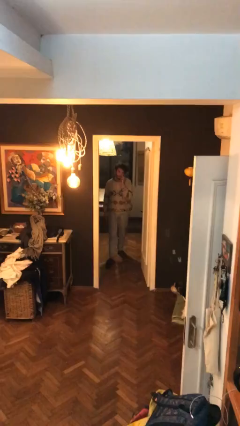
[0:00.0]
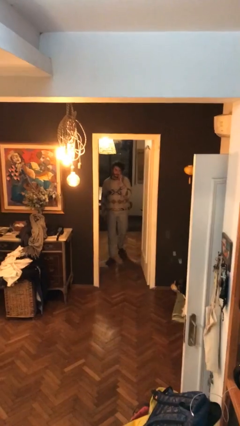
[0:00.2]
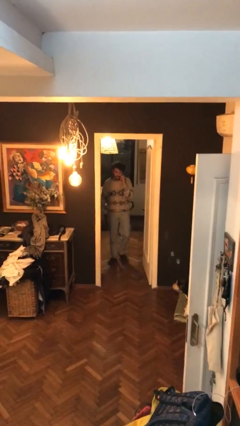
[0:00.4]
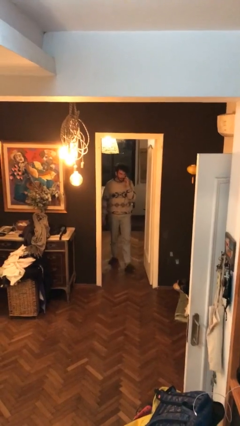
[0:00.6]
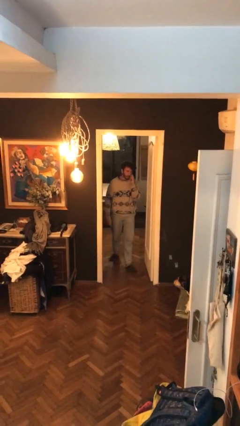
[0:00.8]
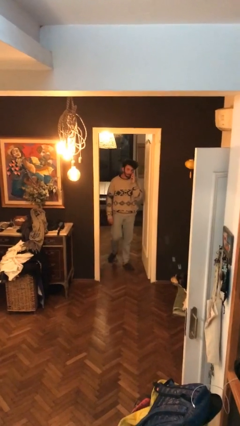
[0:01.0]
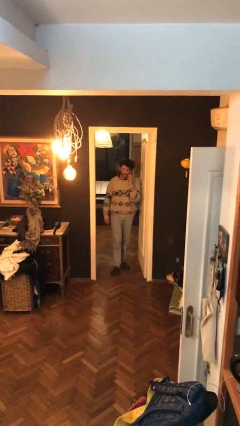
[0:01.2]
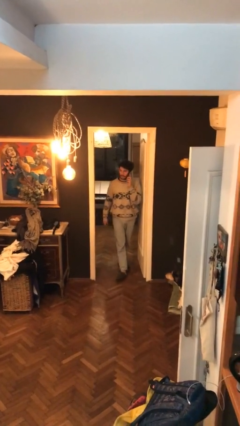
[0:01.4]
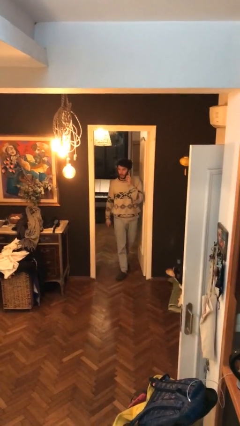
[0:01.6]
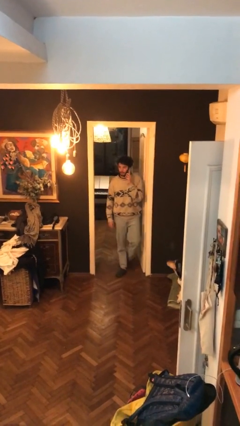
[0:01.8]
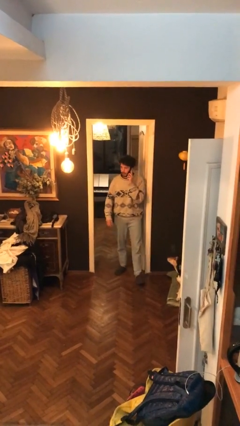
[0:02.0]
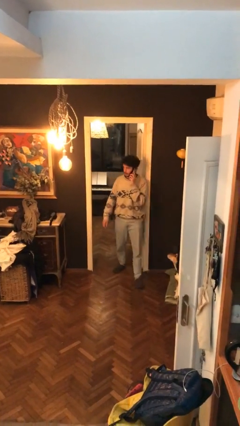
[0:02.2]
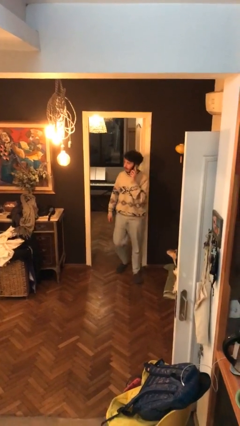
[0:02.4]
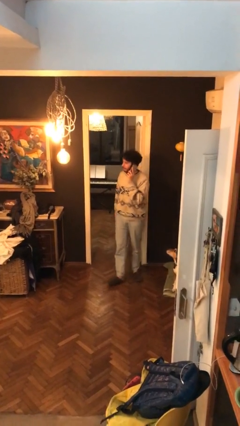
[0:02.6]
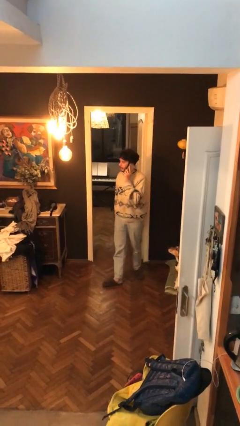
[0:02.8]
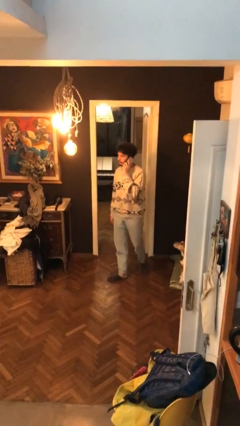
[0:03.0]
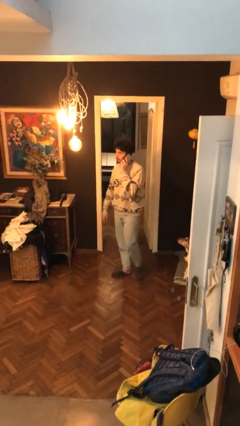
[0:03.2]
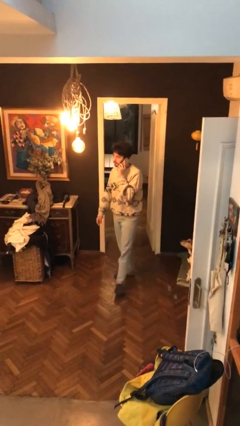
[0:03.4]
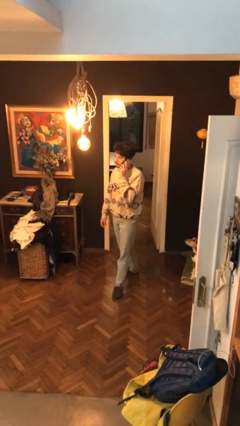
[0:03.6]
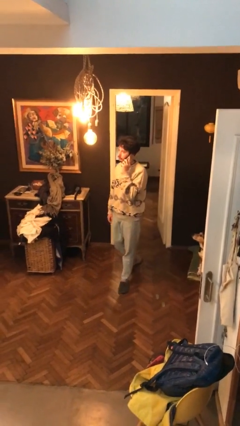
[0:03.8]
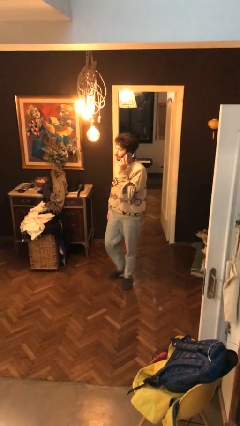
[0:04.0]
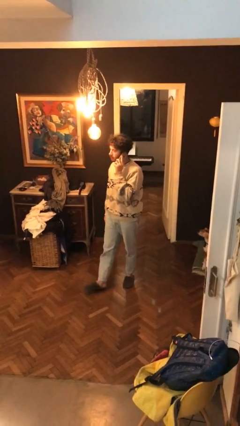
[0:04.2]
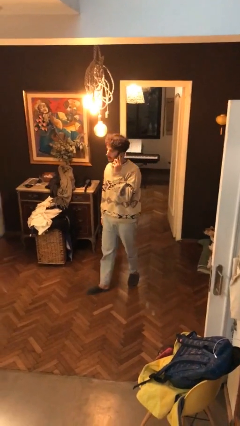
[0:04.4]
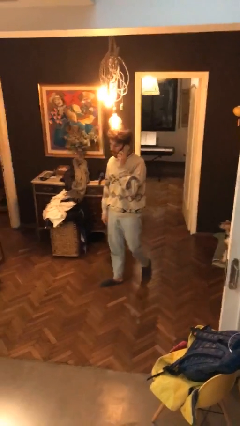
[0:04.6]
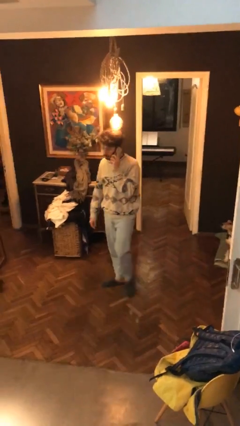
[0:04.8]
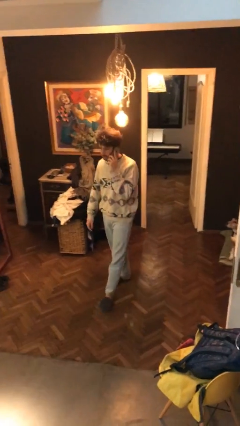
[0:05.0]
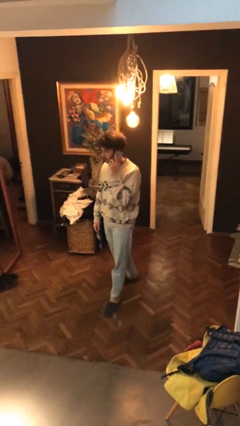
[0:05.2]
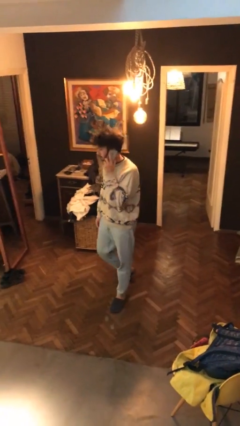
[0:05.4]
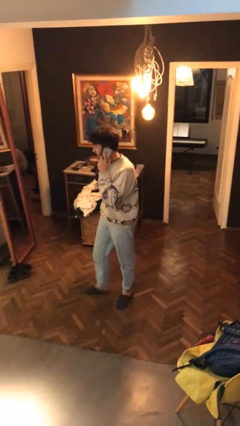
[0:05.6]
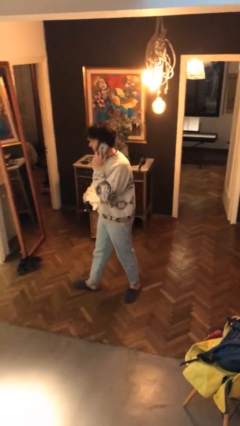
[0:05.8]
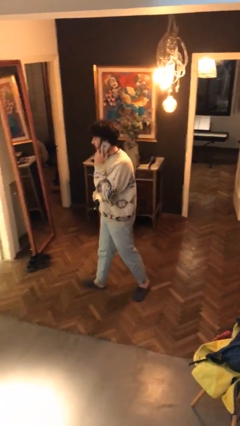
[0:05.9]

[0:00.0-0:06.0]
person enters scene through structure

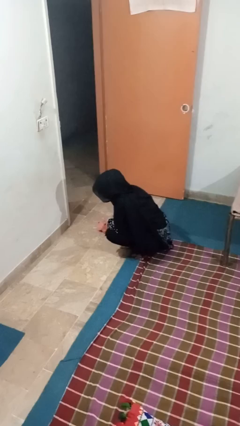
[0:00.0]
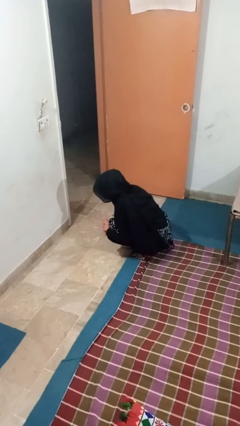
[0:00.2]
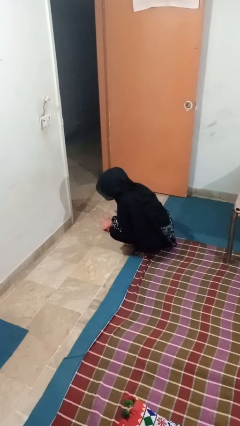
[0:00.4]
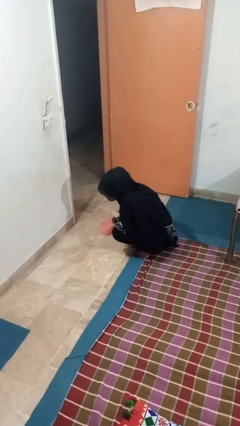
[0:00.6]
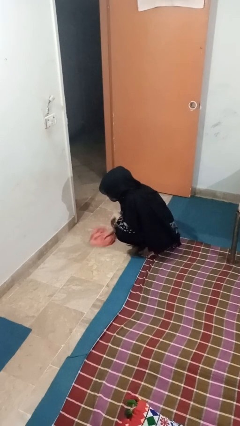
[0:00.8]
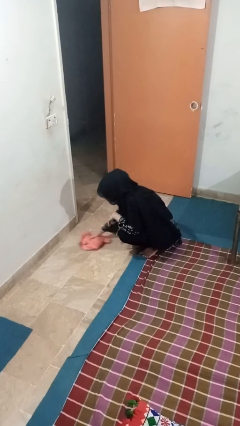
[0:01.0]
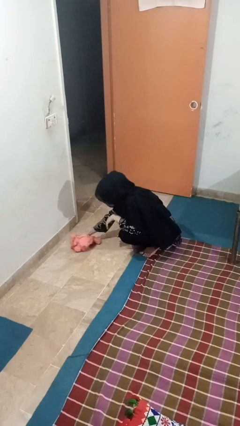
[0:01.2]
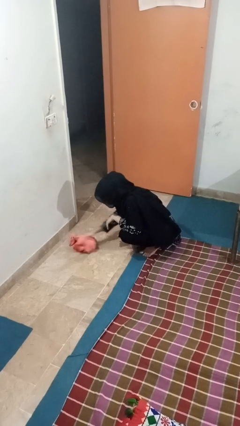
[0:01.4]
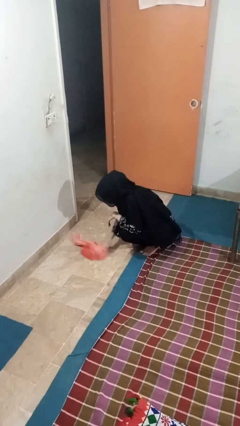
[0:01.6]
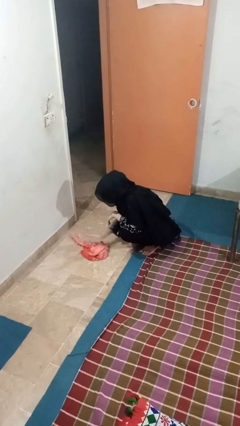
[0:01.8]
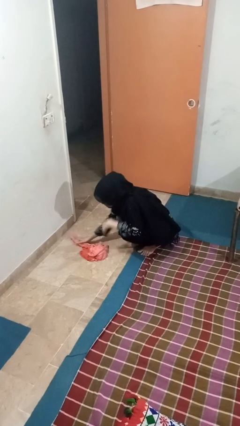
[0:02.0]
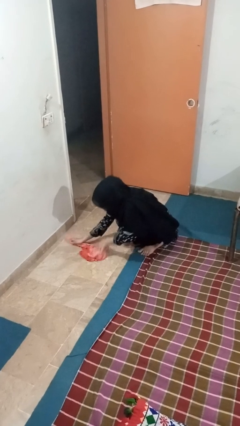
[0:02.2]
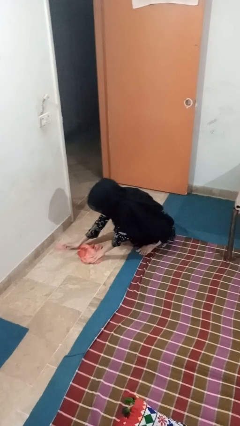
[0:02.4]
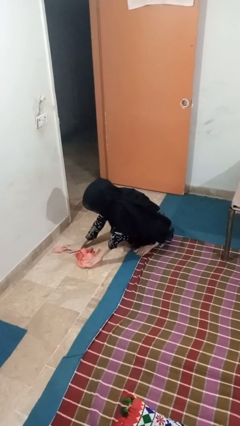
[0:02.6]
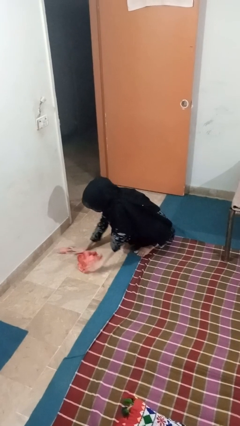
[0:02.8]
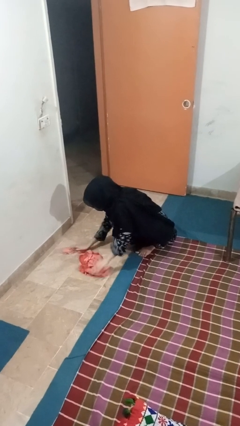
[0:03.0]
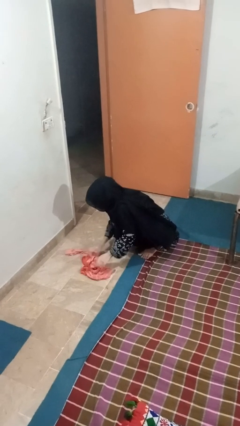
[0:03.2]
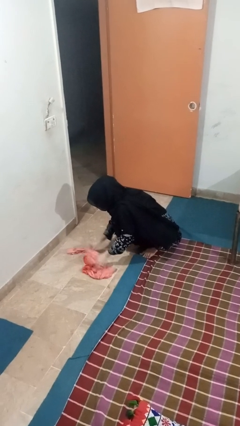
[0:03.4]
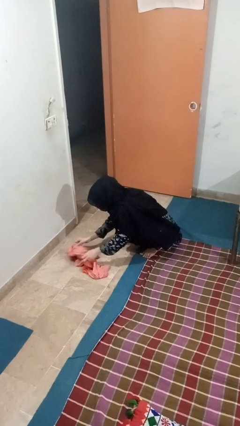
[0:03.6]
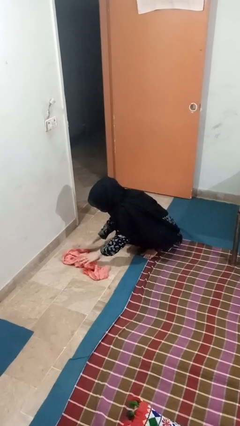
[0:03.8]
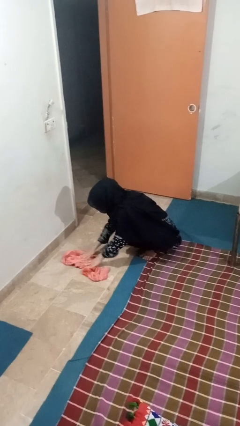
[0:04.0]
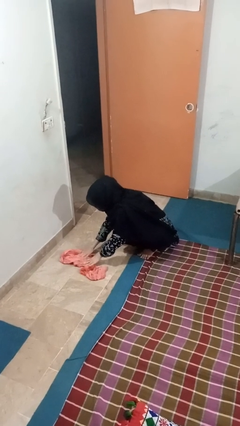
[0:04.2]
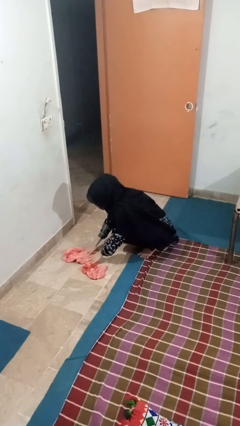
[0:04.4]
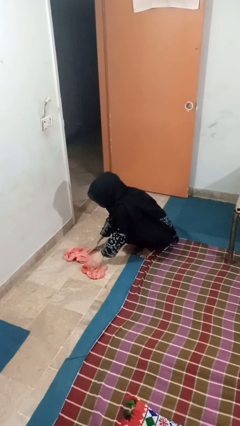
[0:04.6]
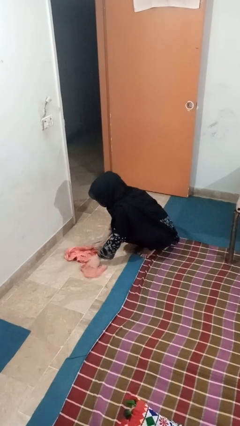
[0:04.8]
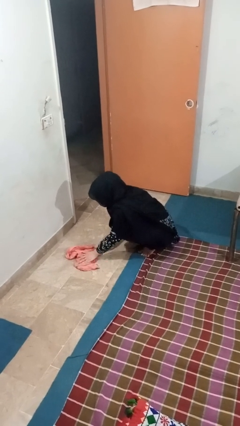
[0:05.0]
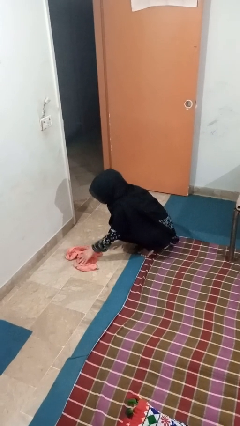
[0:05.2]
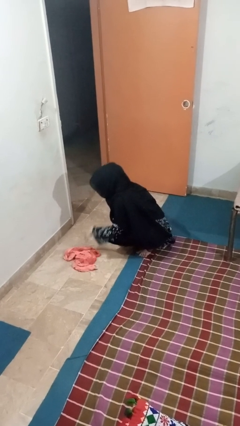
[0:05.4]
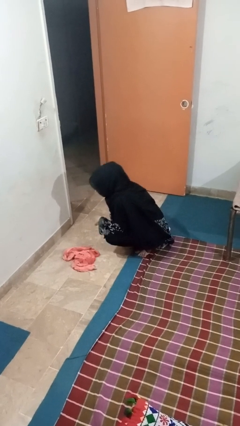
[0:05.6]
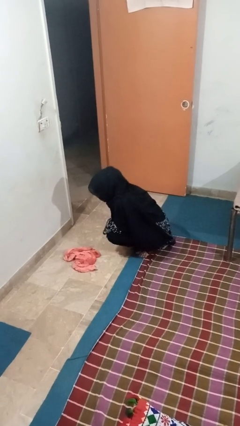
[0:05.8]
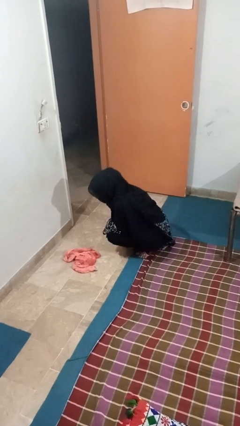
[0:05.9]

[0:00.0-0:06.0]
person mops

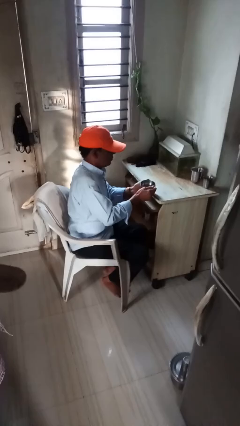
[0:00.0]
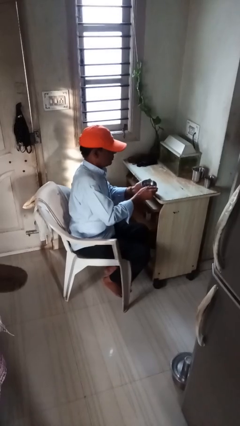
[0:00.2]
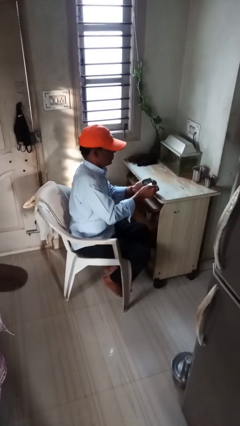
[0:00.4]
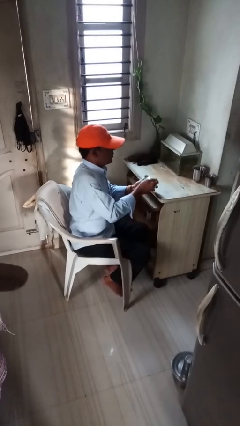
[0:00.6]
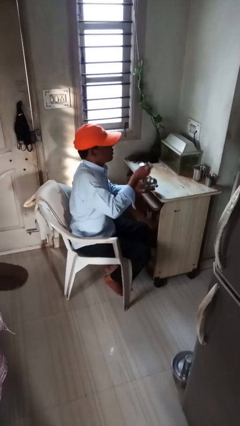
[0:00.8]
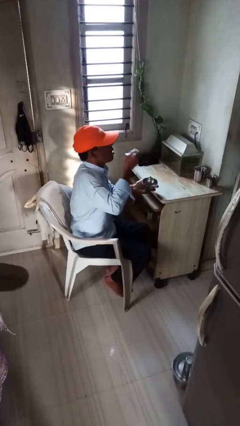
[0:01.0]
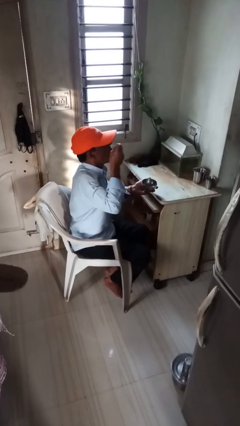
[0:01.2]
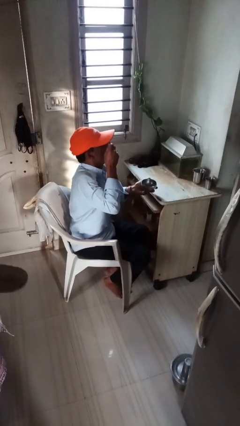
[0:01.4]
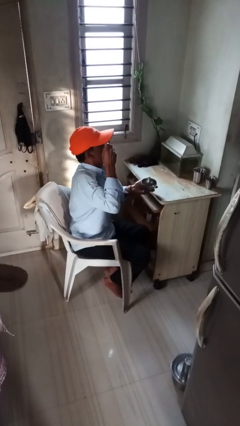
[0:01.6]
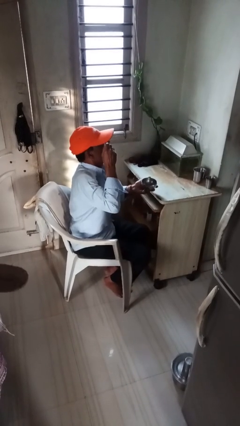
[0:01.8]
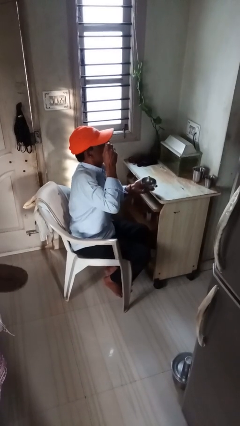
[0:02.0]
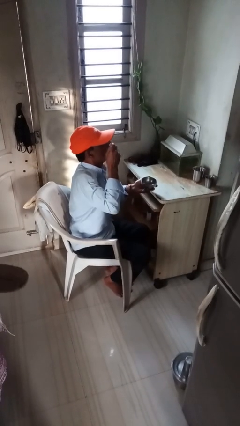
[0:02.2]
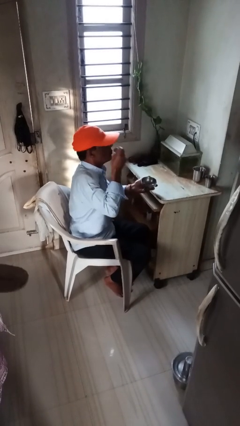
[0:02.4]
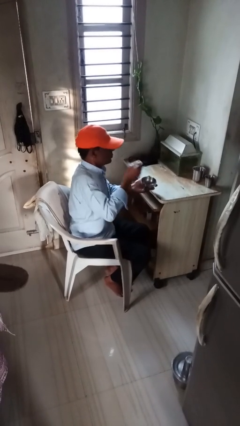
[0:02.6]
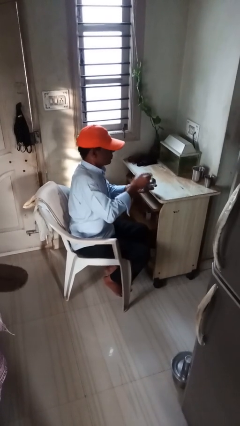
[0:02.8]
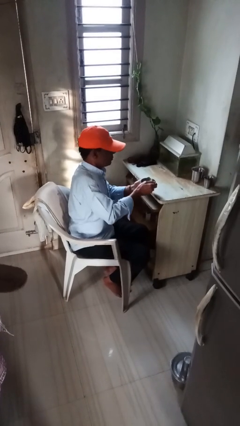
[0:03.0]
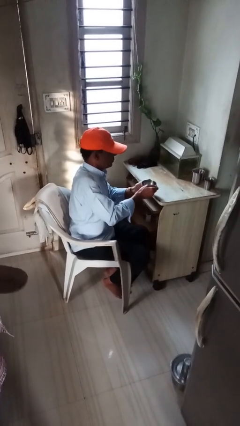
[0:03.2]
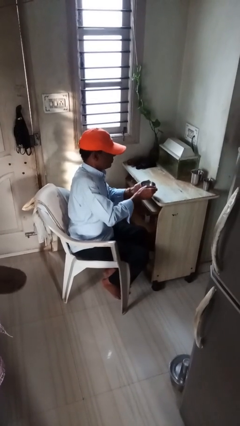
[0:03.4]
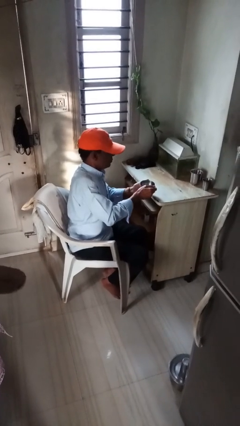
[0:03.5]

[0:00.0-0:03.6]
person eats with utensil

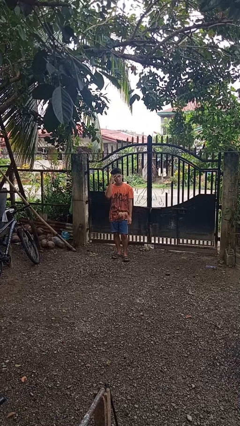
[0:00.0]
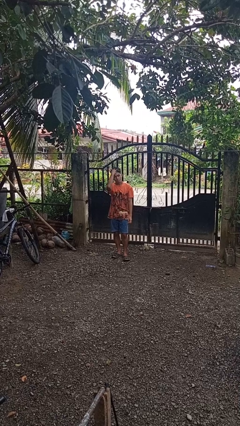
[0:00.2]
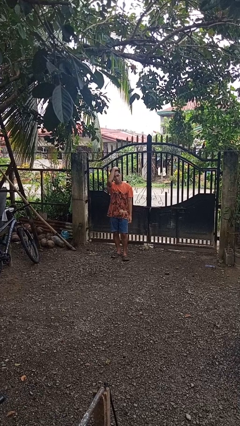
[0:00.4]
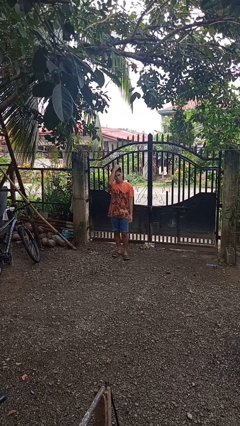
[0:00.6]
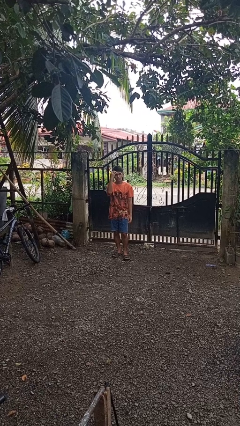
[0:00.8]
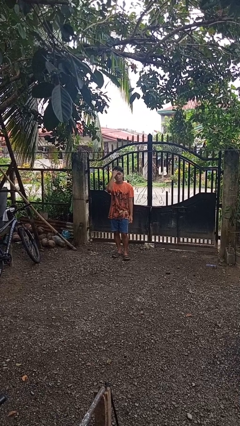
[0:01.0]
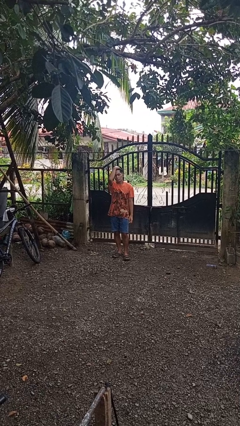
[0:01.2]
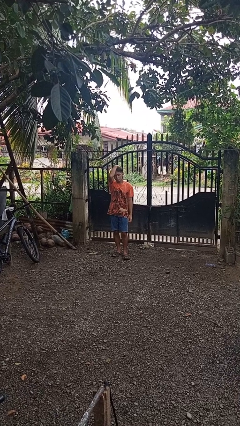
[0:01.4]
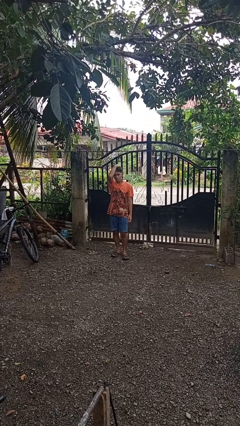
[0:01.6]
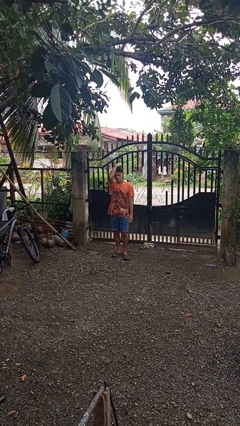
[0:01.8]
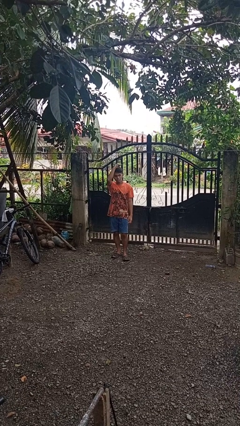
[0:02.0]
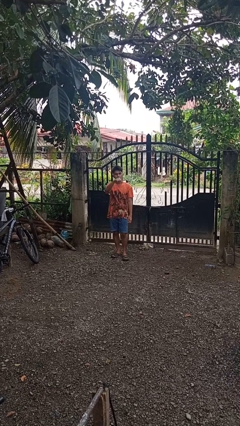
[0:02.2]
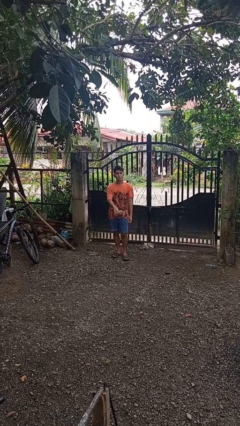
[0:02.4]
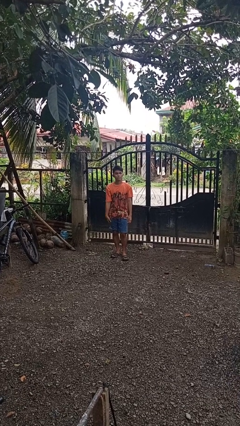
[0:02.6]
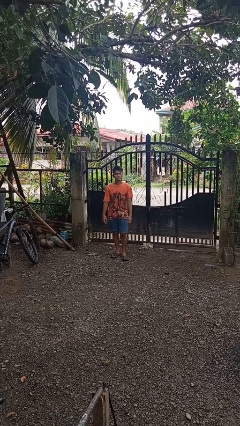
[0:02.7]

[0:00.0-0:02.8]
person strokes hair
